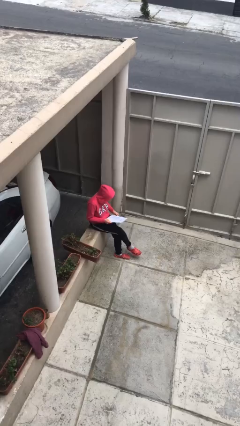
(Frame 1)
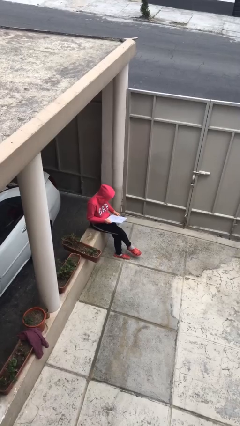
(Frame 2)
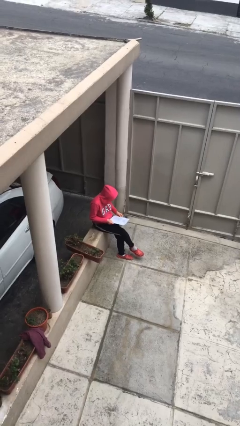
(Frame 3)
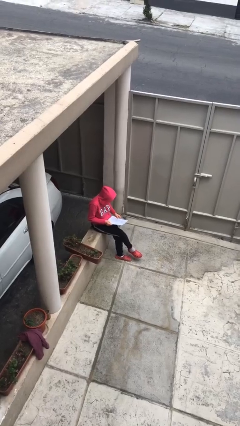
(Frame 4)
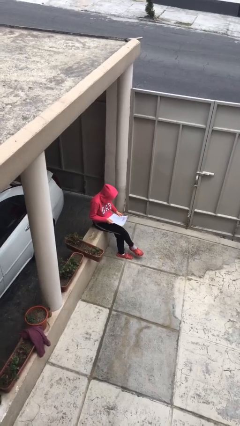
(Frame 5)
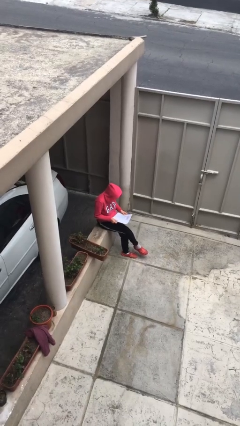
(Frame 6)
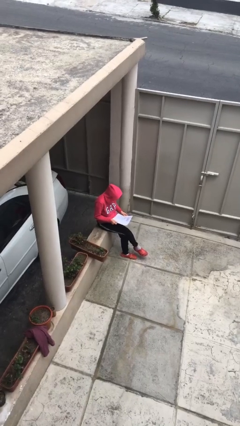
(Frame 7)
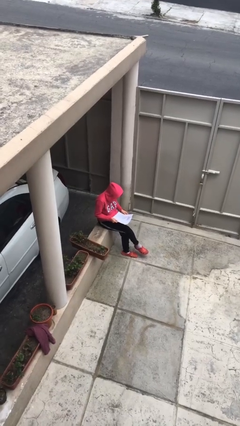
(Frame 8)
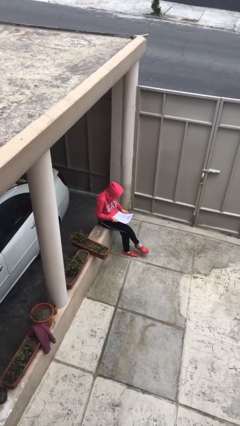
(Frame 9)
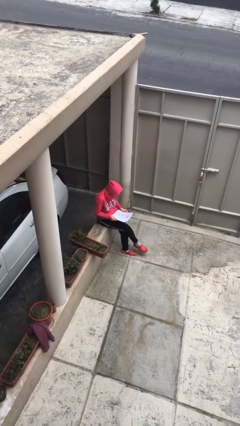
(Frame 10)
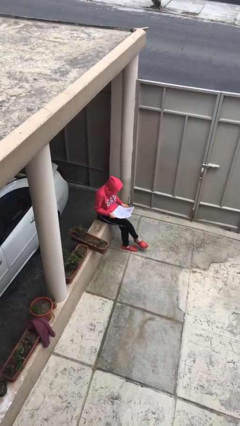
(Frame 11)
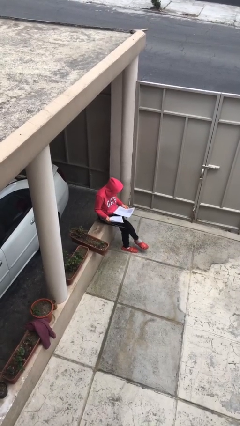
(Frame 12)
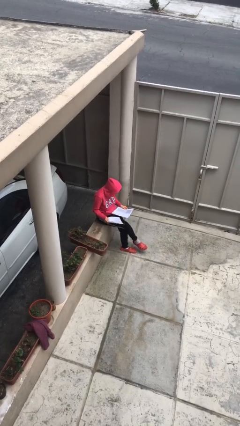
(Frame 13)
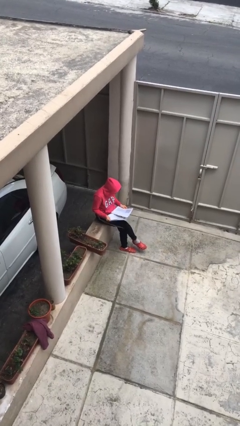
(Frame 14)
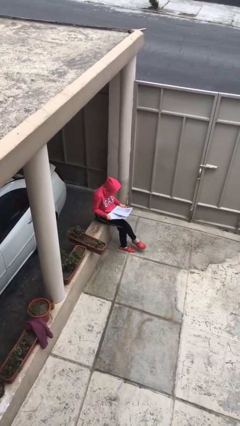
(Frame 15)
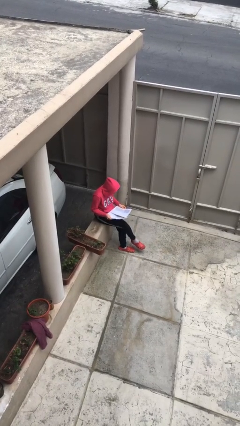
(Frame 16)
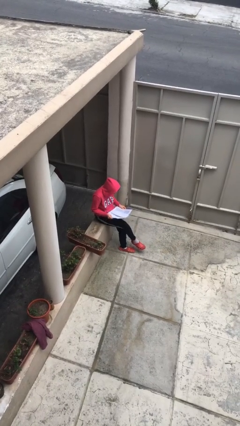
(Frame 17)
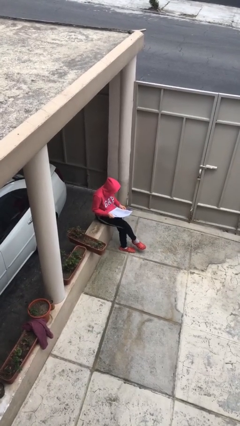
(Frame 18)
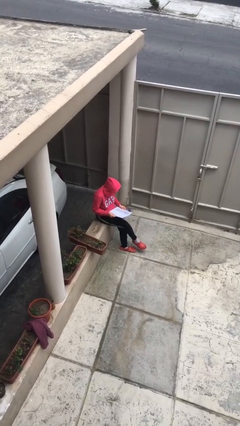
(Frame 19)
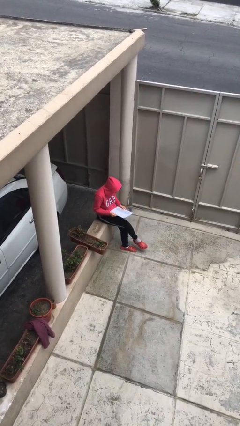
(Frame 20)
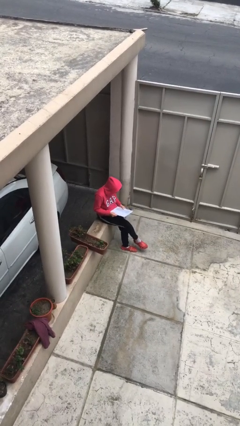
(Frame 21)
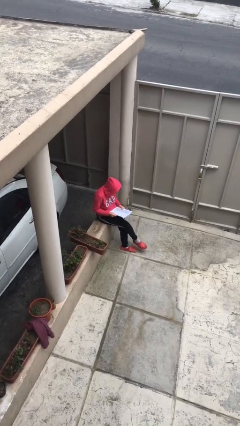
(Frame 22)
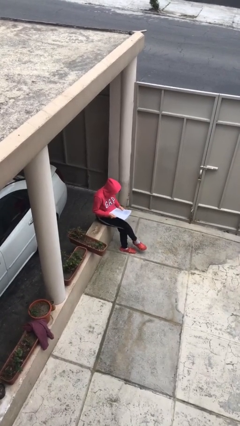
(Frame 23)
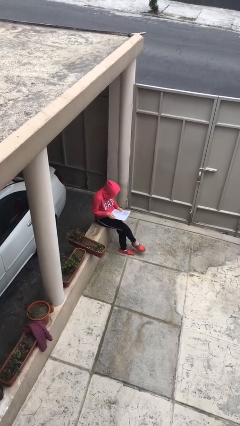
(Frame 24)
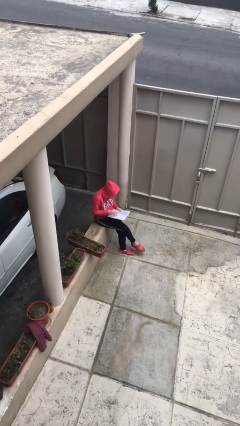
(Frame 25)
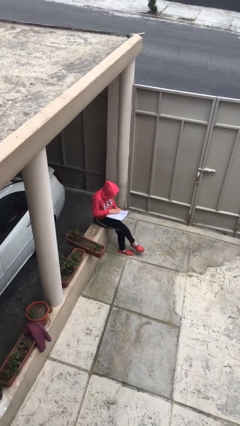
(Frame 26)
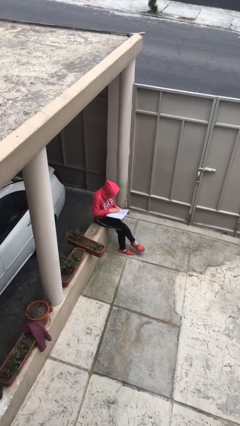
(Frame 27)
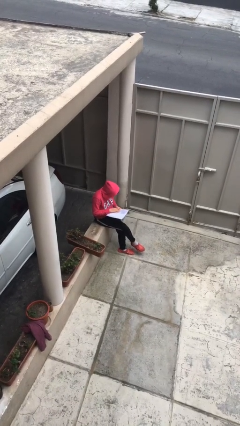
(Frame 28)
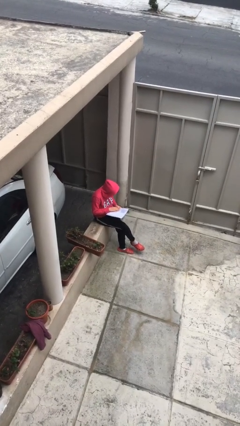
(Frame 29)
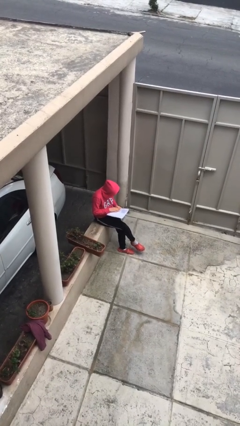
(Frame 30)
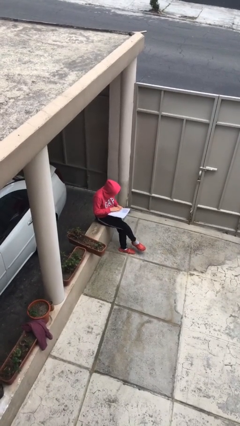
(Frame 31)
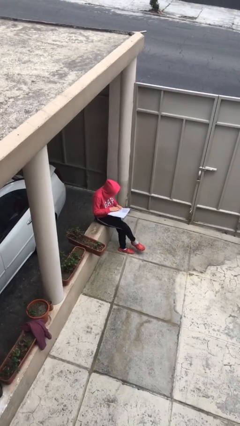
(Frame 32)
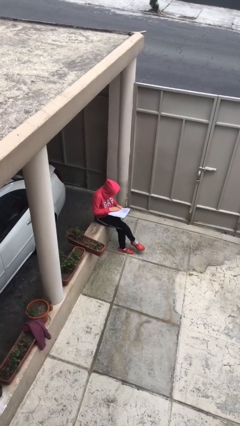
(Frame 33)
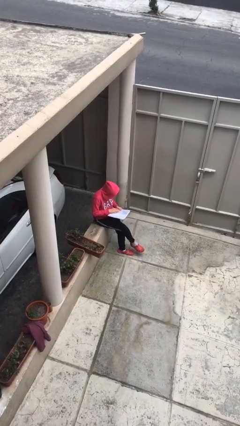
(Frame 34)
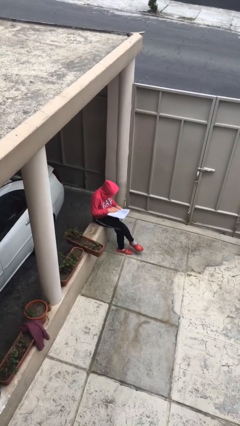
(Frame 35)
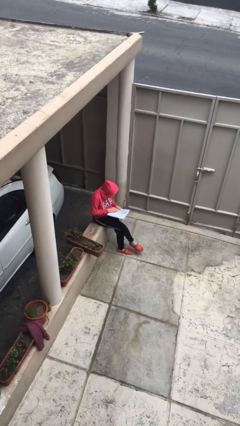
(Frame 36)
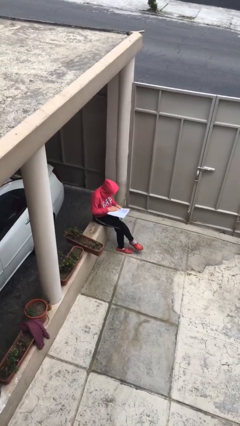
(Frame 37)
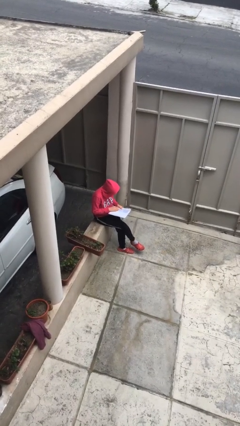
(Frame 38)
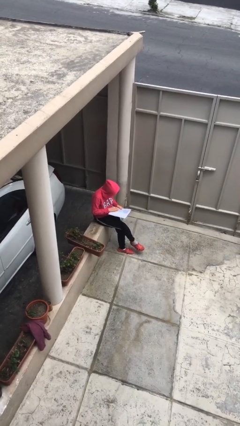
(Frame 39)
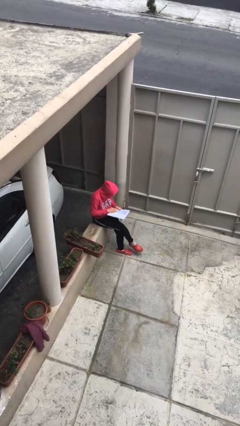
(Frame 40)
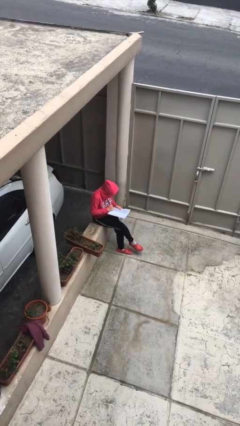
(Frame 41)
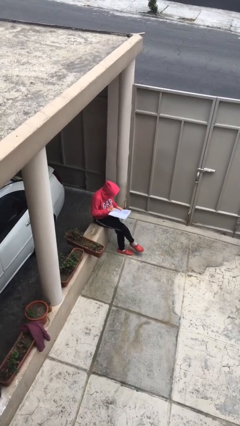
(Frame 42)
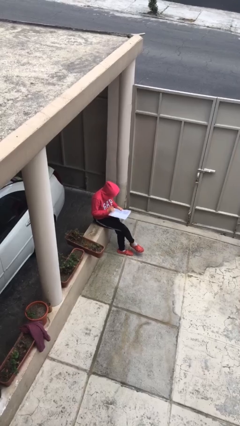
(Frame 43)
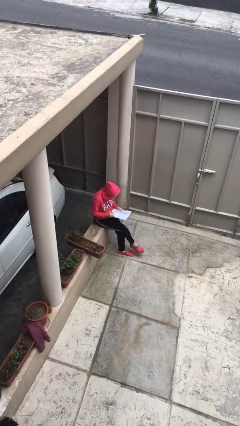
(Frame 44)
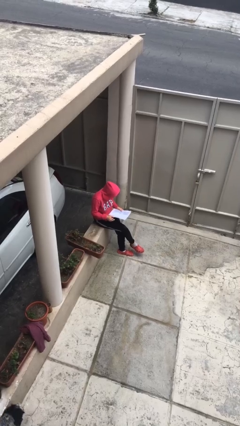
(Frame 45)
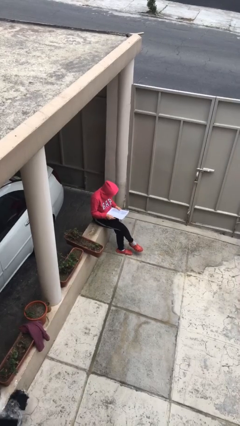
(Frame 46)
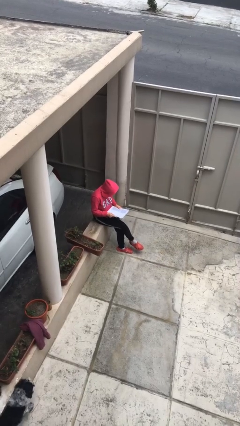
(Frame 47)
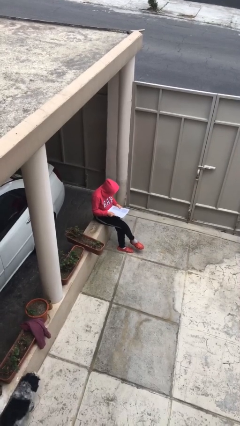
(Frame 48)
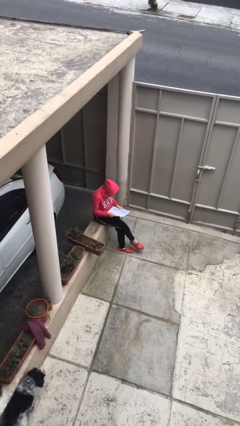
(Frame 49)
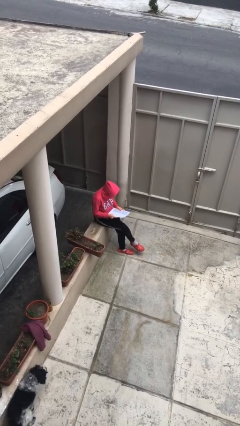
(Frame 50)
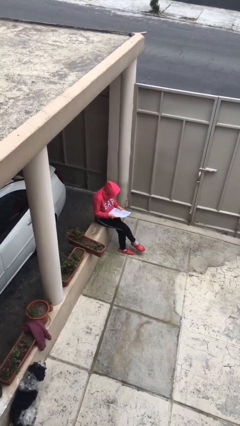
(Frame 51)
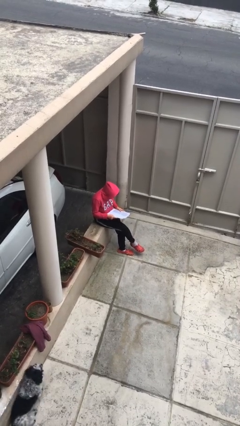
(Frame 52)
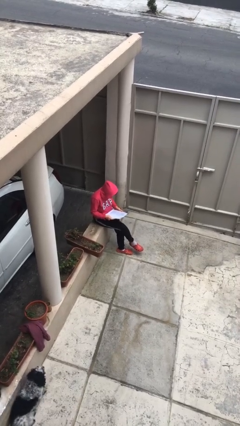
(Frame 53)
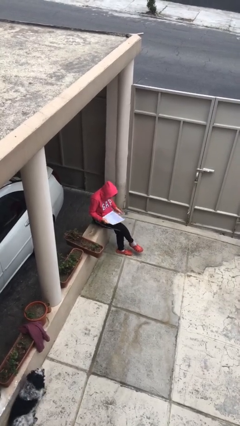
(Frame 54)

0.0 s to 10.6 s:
person reads document

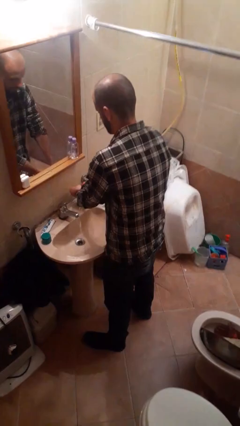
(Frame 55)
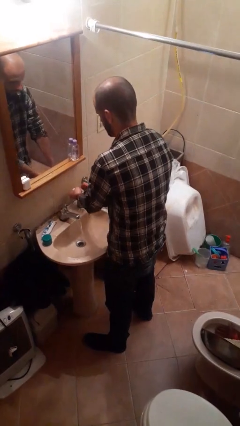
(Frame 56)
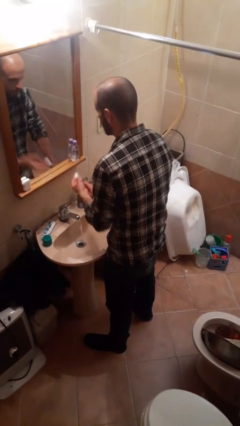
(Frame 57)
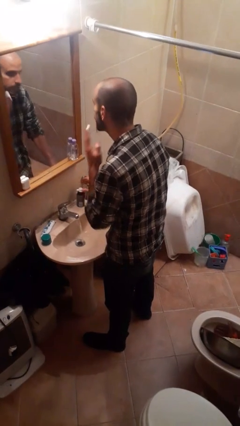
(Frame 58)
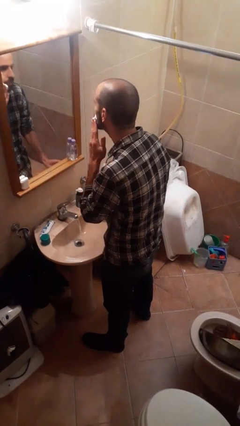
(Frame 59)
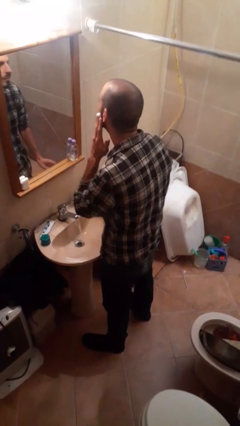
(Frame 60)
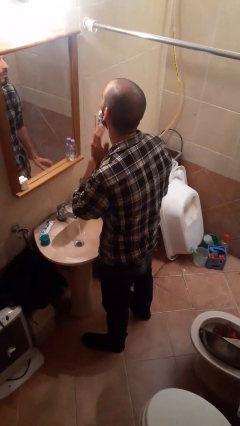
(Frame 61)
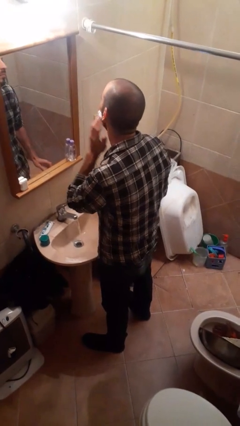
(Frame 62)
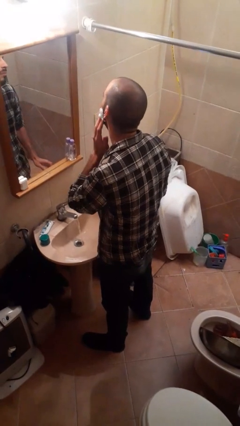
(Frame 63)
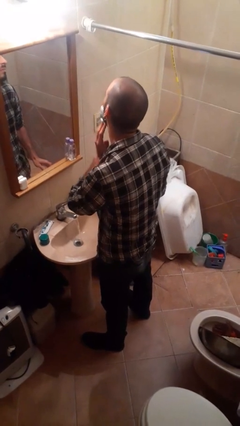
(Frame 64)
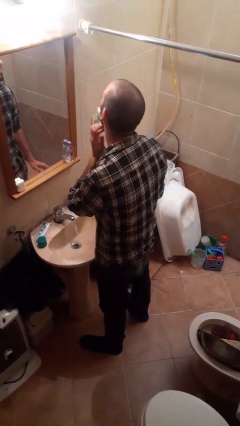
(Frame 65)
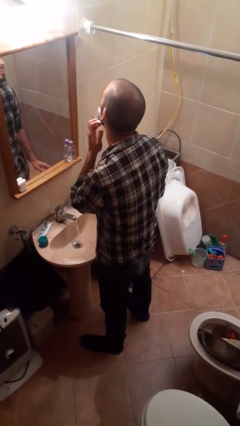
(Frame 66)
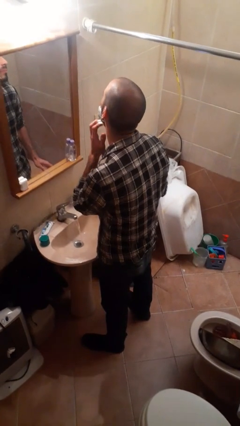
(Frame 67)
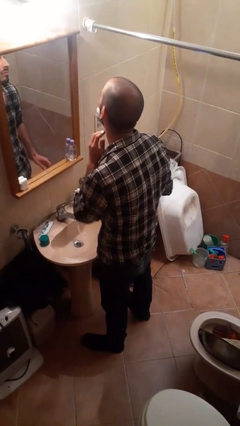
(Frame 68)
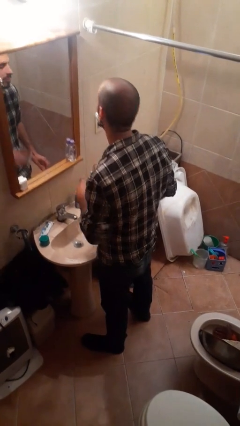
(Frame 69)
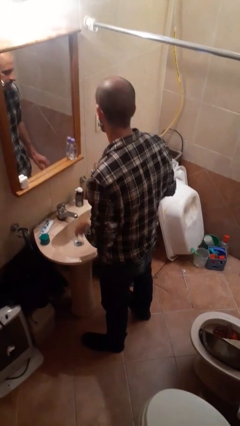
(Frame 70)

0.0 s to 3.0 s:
person applies shaving cream

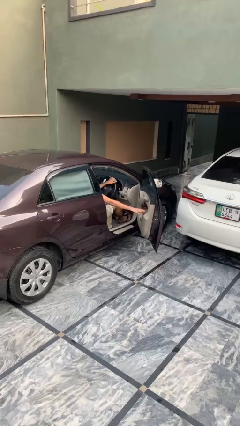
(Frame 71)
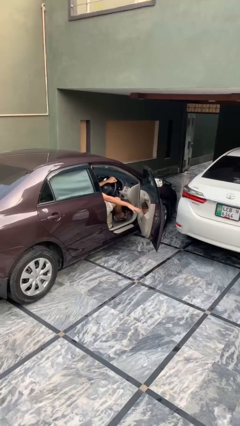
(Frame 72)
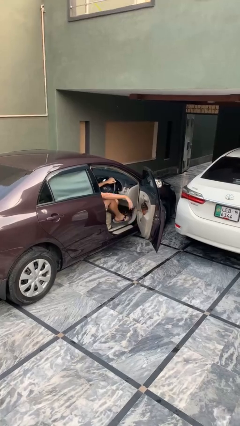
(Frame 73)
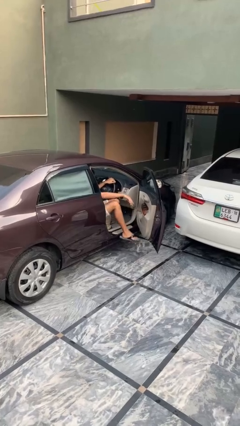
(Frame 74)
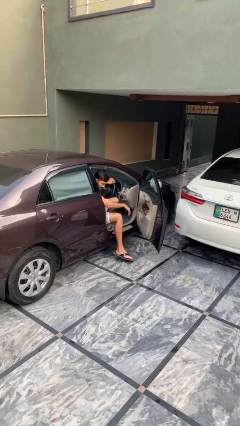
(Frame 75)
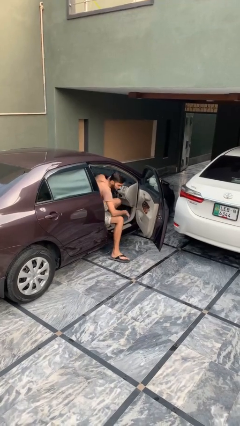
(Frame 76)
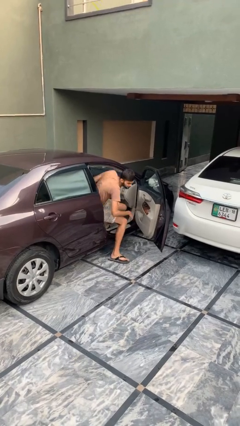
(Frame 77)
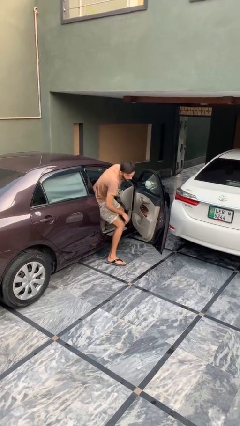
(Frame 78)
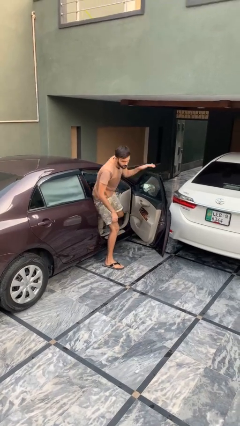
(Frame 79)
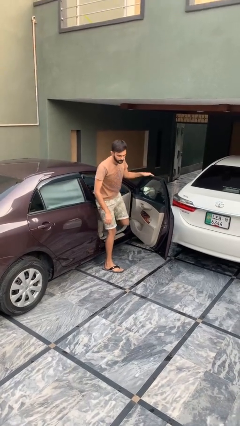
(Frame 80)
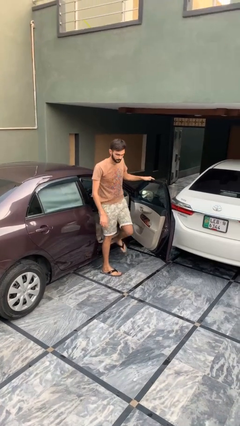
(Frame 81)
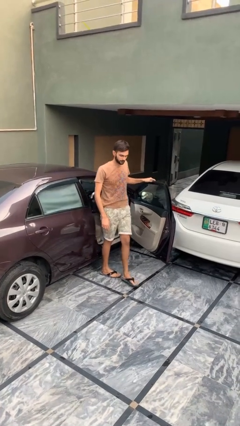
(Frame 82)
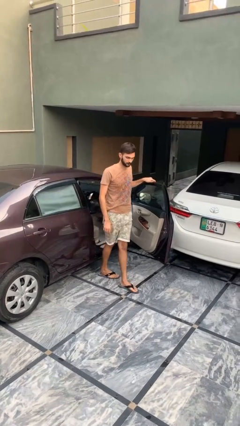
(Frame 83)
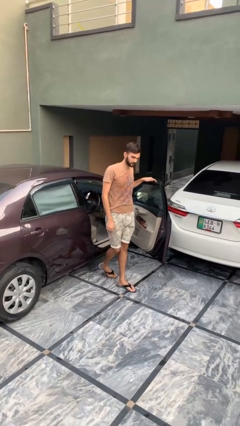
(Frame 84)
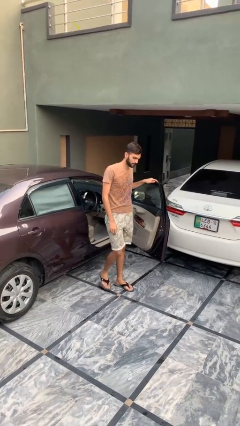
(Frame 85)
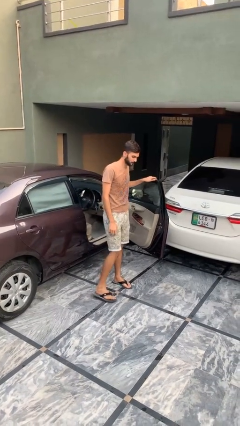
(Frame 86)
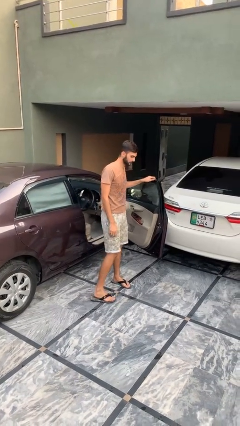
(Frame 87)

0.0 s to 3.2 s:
person exits car

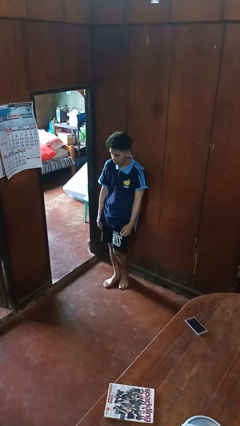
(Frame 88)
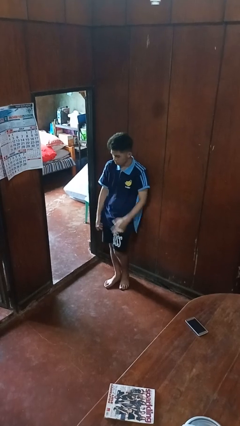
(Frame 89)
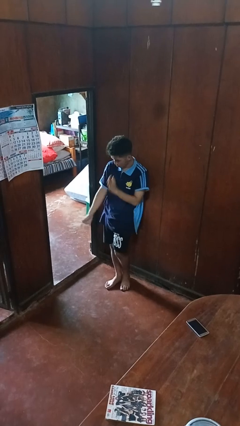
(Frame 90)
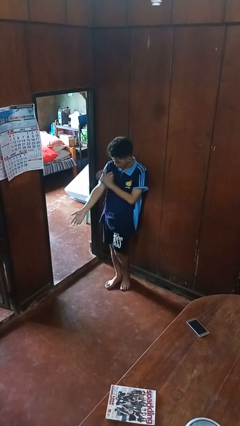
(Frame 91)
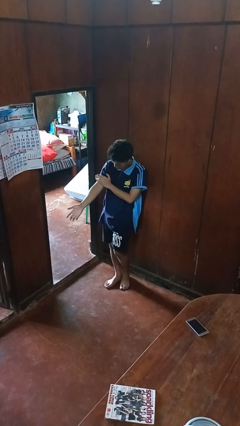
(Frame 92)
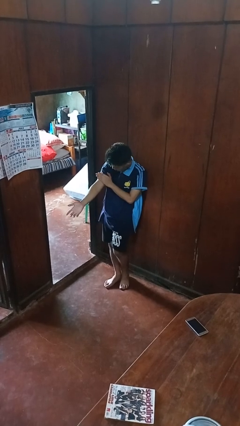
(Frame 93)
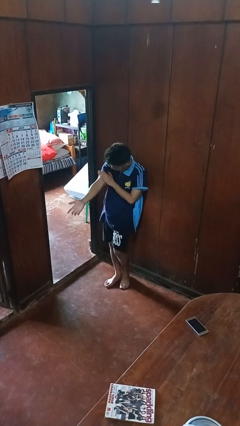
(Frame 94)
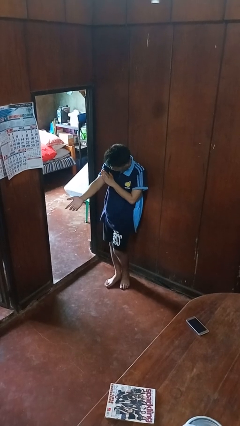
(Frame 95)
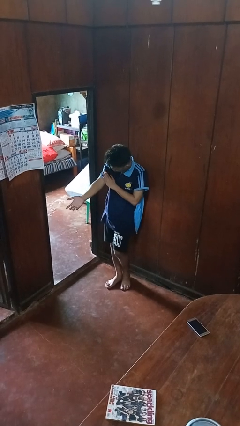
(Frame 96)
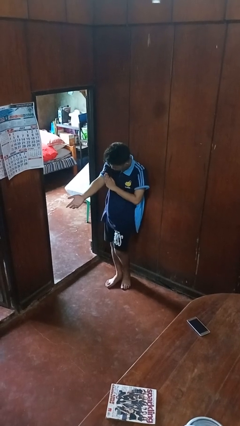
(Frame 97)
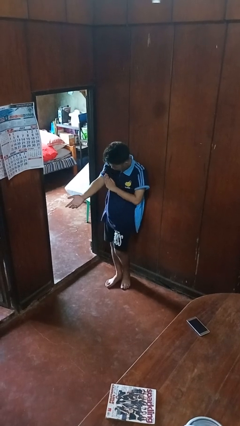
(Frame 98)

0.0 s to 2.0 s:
person swats bug
